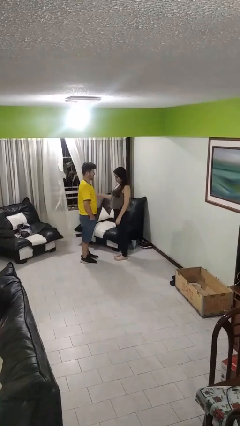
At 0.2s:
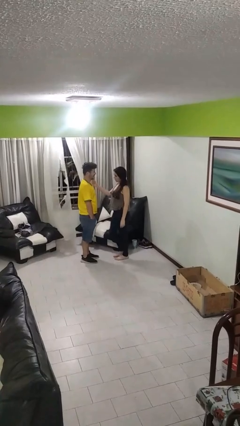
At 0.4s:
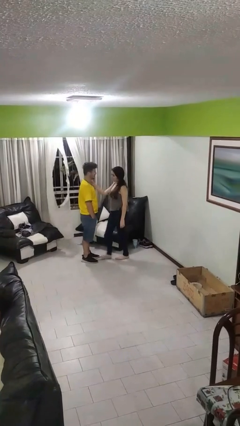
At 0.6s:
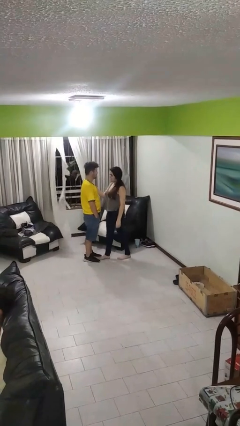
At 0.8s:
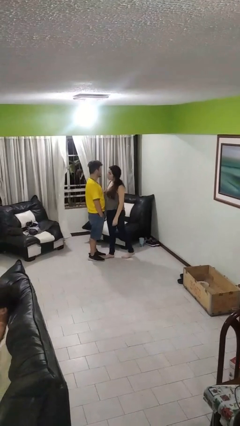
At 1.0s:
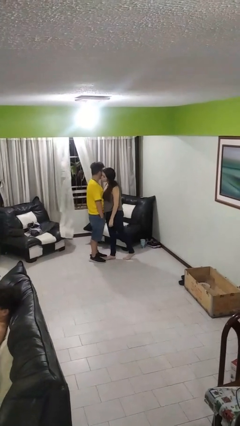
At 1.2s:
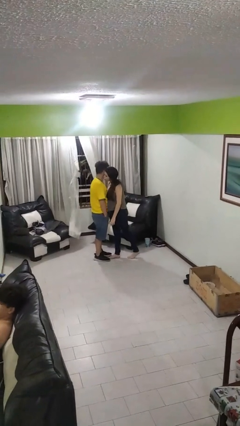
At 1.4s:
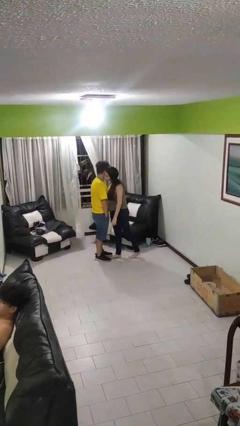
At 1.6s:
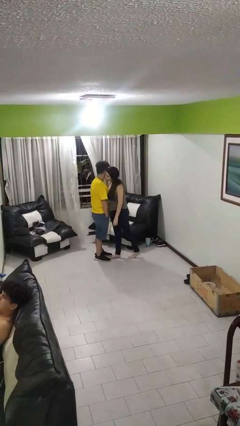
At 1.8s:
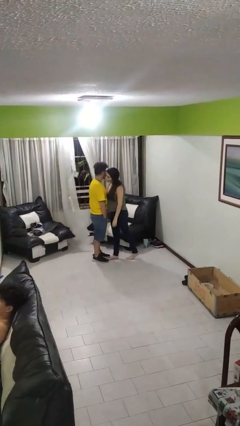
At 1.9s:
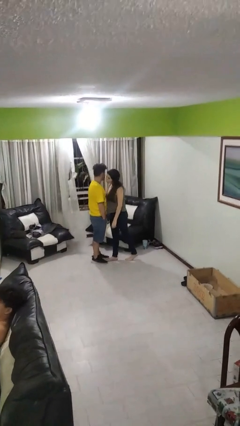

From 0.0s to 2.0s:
person kisses cheek of person

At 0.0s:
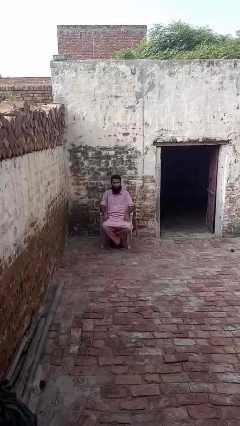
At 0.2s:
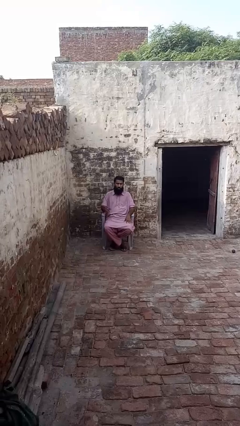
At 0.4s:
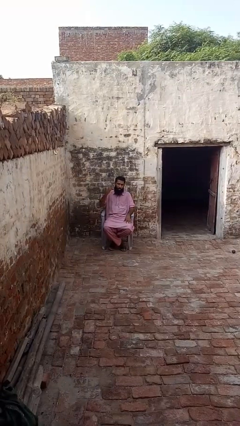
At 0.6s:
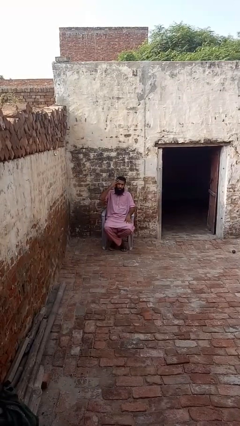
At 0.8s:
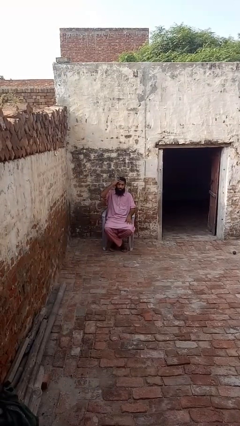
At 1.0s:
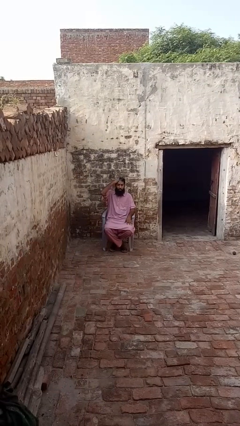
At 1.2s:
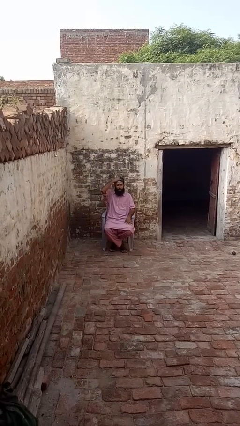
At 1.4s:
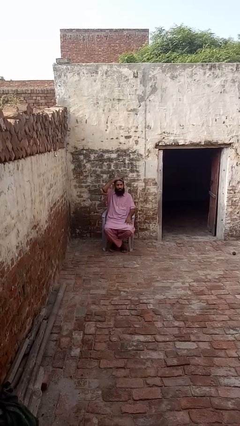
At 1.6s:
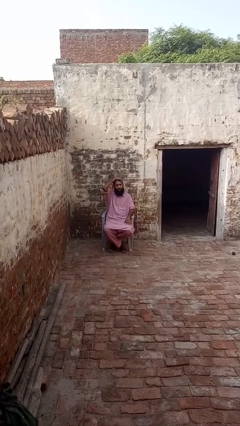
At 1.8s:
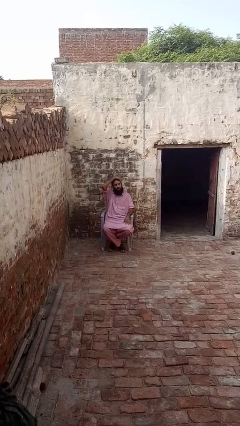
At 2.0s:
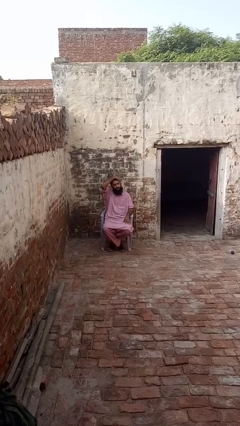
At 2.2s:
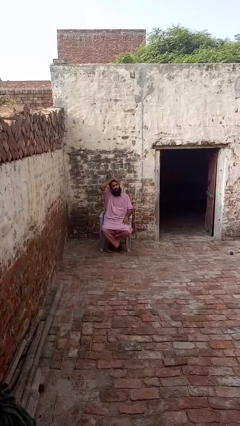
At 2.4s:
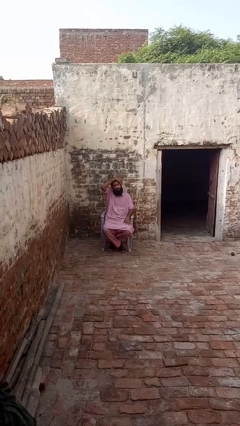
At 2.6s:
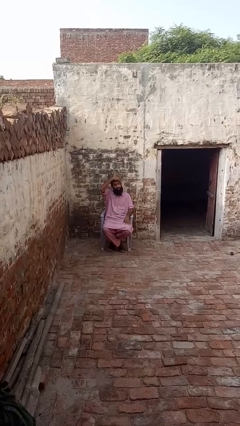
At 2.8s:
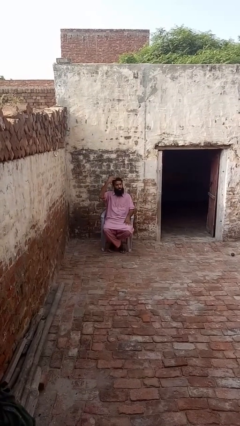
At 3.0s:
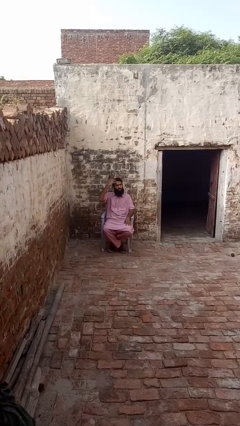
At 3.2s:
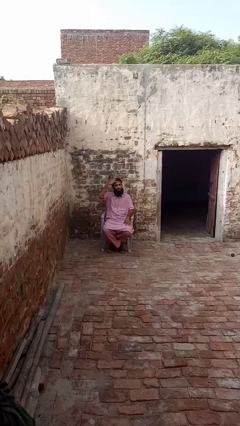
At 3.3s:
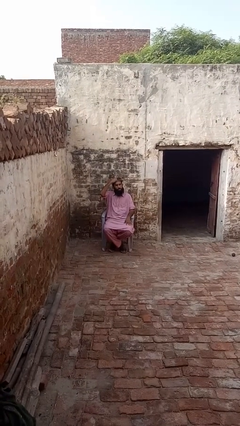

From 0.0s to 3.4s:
person strokes hair

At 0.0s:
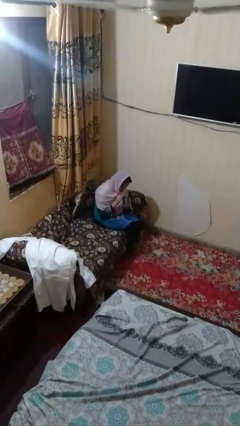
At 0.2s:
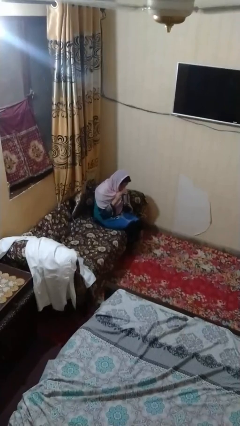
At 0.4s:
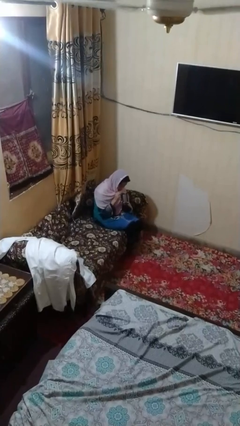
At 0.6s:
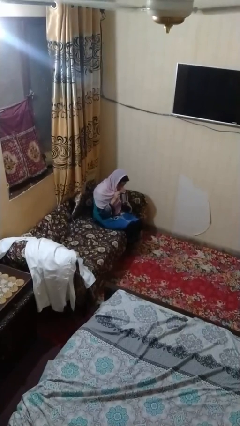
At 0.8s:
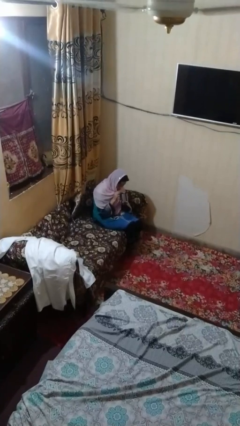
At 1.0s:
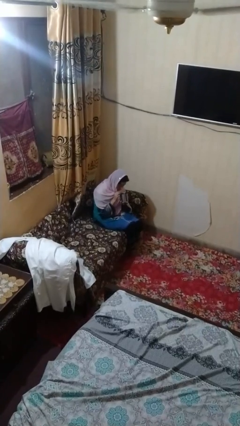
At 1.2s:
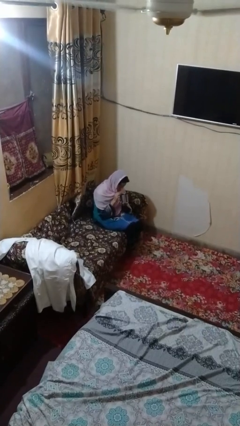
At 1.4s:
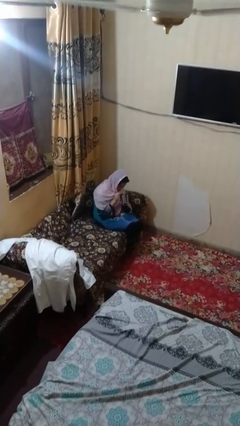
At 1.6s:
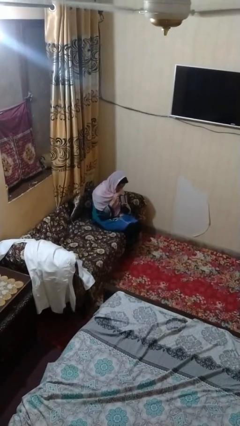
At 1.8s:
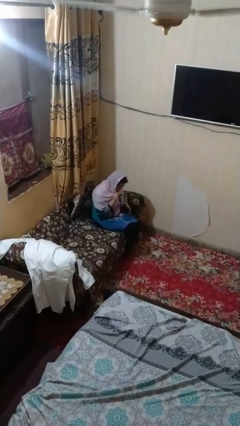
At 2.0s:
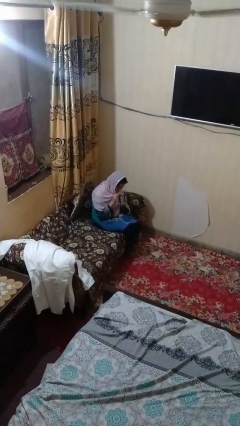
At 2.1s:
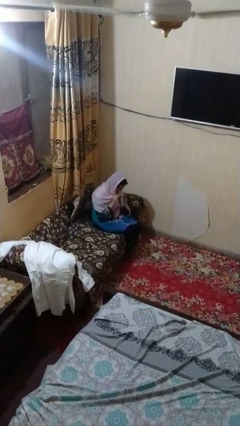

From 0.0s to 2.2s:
person drinks from straw

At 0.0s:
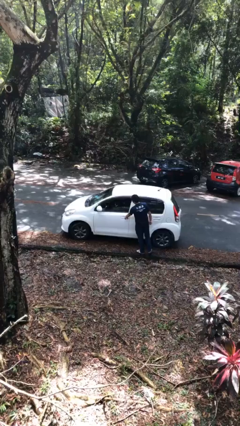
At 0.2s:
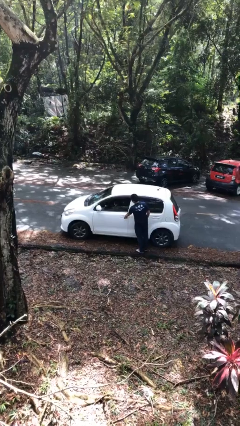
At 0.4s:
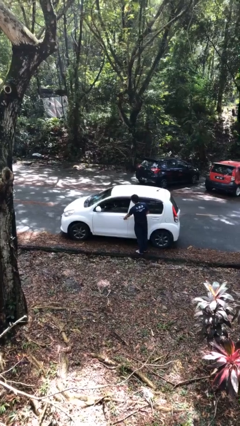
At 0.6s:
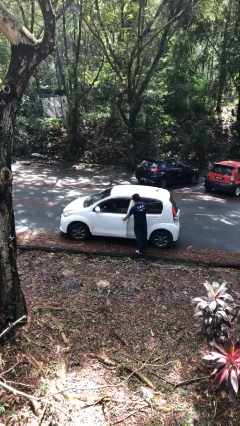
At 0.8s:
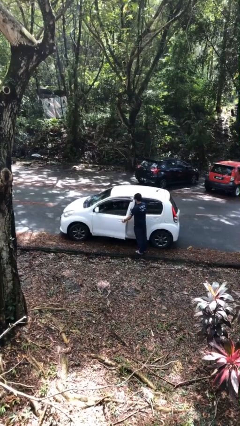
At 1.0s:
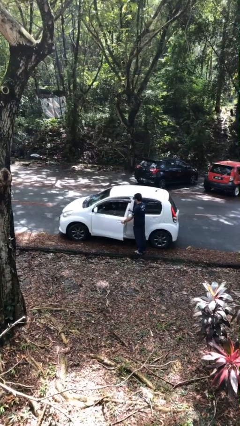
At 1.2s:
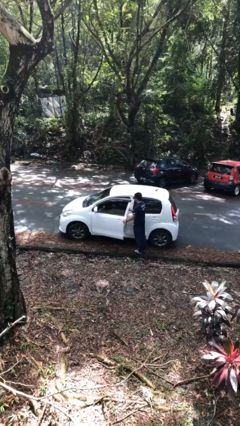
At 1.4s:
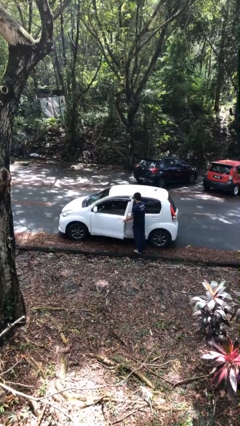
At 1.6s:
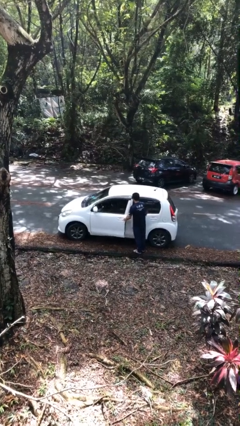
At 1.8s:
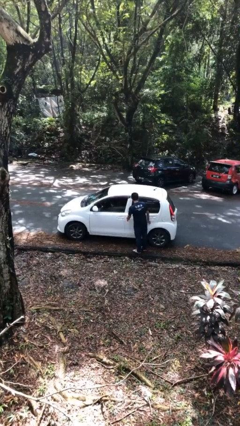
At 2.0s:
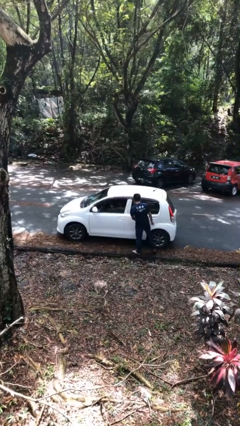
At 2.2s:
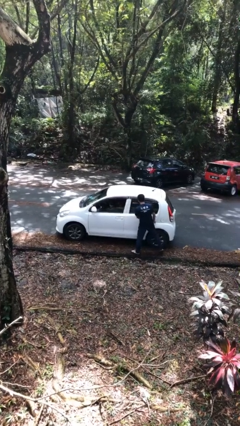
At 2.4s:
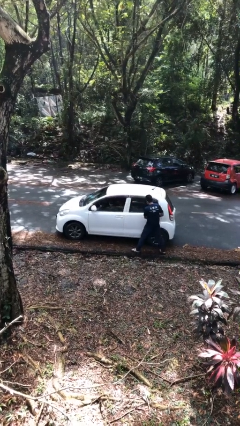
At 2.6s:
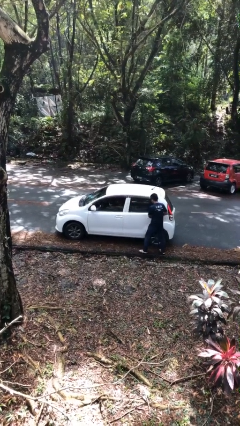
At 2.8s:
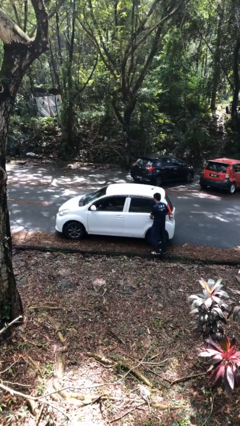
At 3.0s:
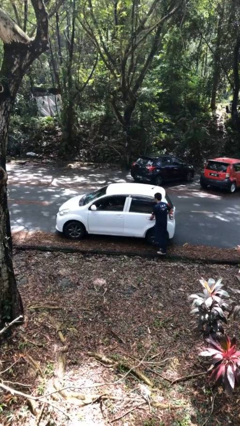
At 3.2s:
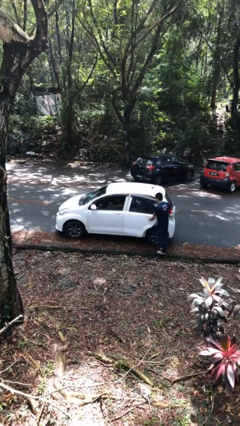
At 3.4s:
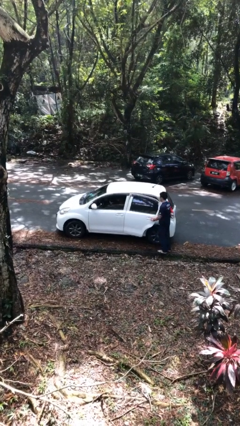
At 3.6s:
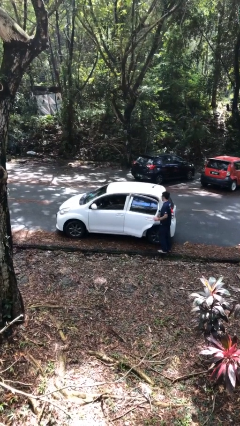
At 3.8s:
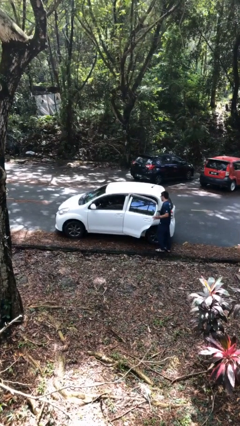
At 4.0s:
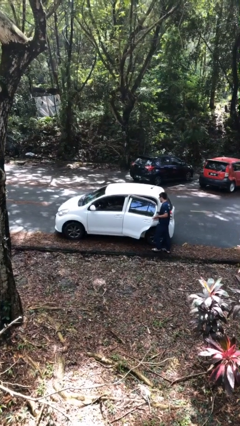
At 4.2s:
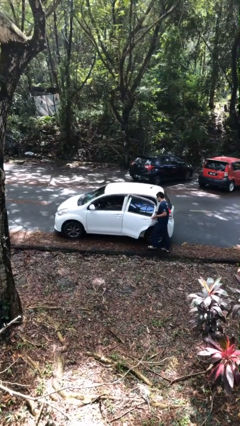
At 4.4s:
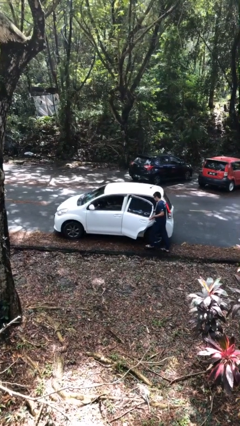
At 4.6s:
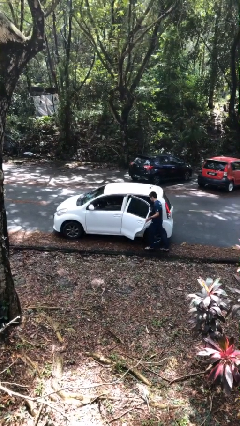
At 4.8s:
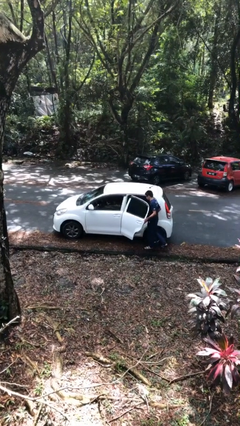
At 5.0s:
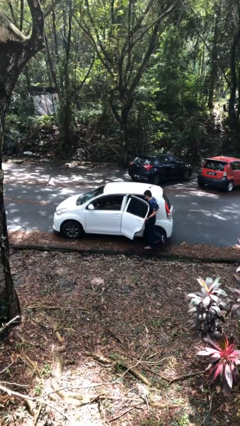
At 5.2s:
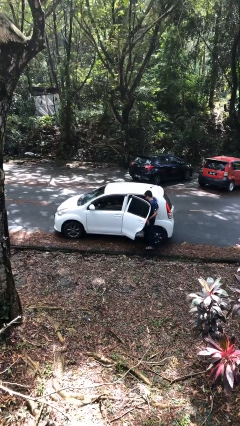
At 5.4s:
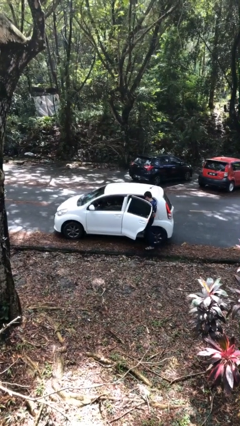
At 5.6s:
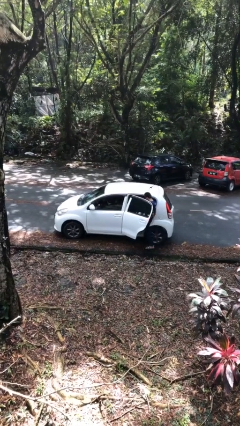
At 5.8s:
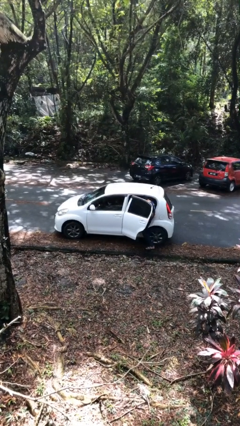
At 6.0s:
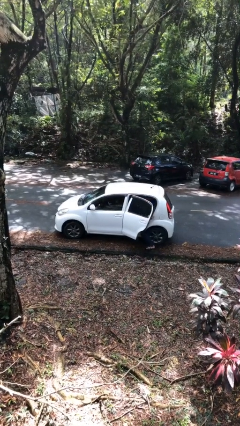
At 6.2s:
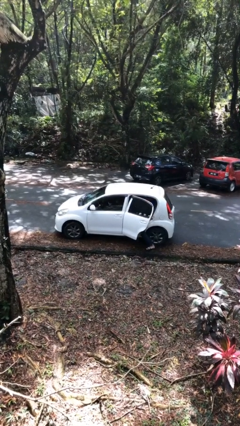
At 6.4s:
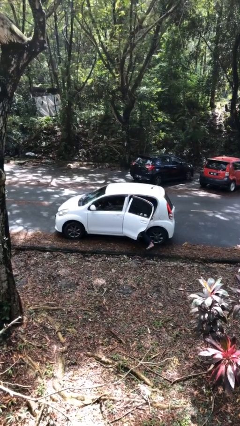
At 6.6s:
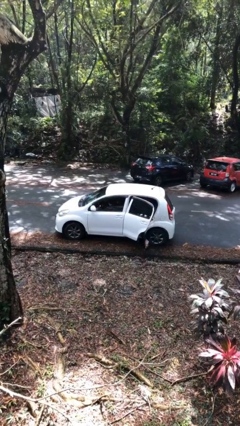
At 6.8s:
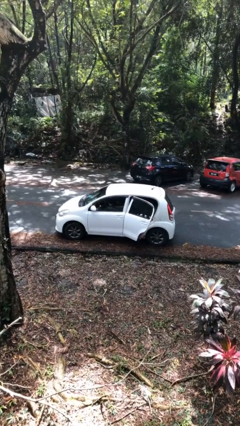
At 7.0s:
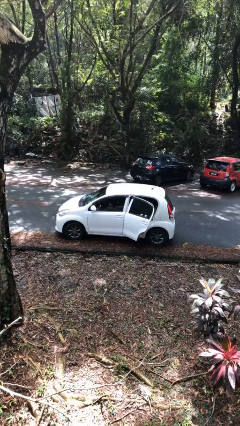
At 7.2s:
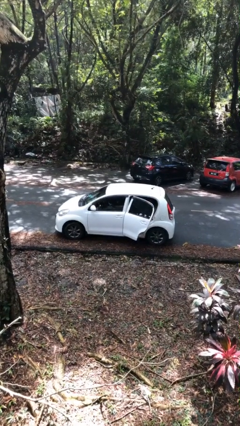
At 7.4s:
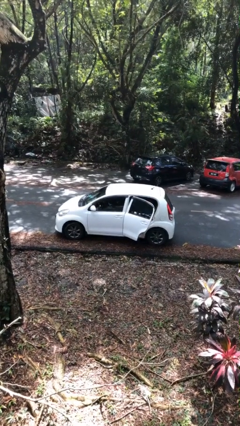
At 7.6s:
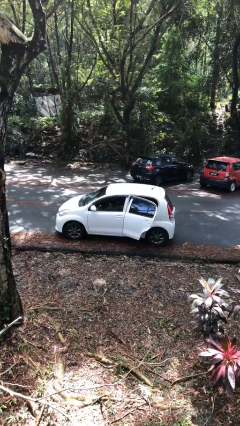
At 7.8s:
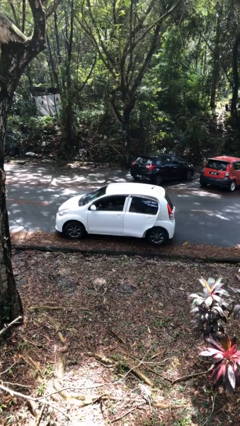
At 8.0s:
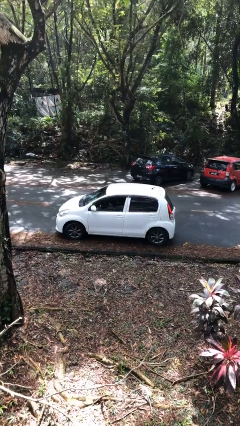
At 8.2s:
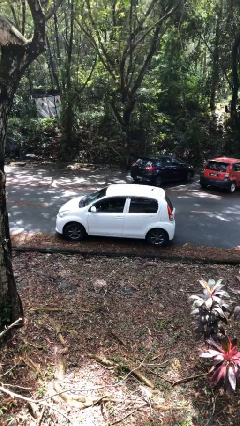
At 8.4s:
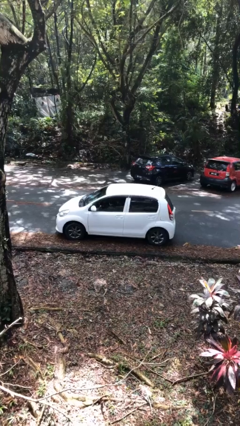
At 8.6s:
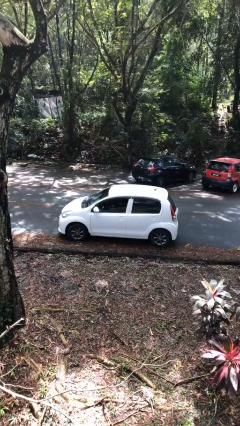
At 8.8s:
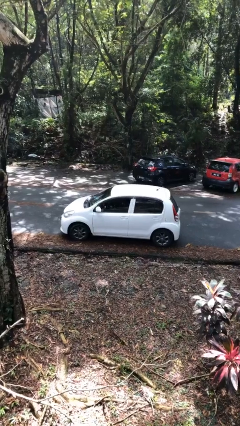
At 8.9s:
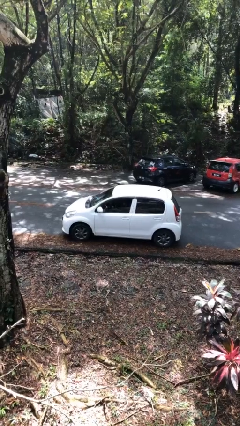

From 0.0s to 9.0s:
car picks up person

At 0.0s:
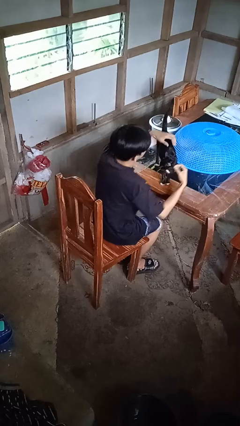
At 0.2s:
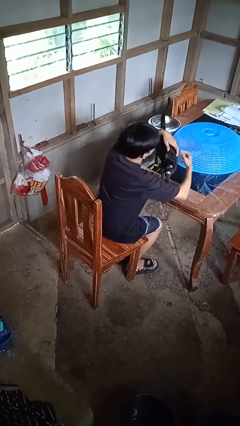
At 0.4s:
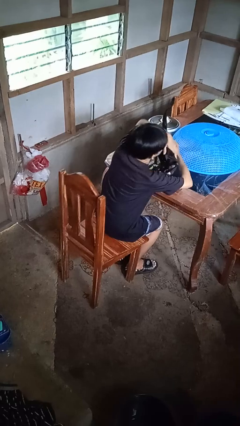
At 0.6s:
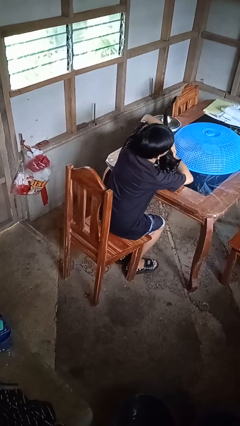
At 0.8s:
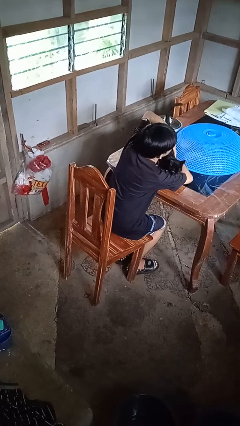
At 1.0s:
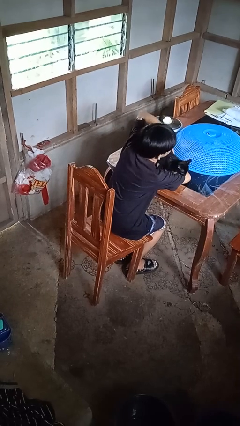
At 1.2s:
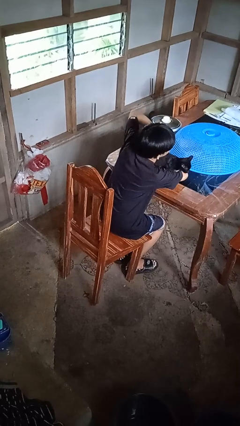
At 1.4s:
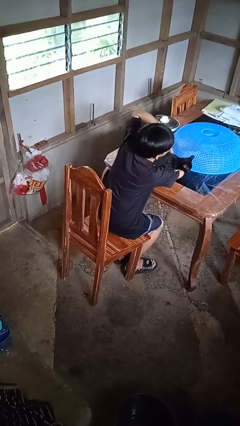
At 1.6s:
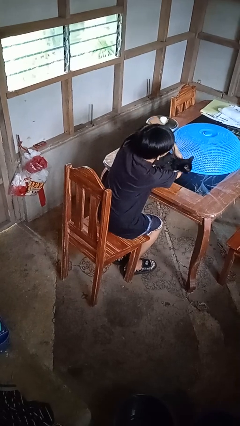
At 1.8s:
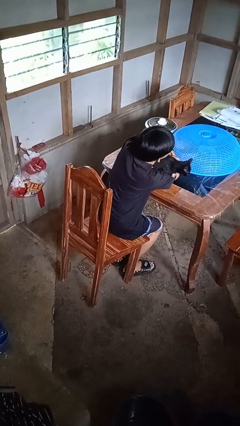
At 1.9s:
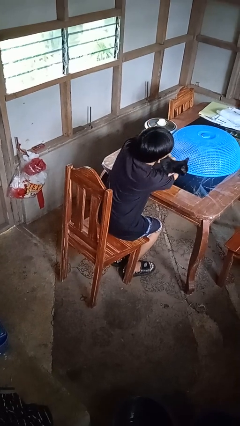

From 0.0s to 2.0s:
person hugs cat
